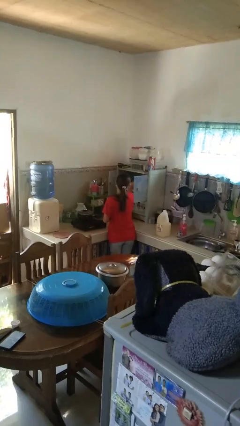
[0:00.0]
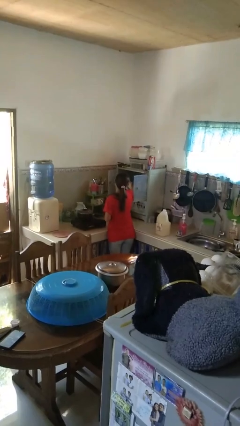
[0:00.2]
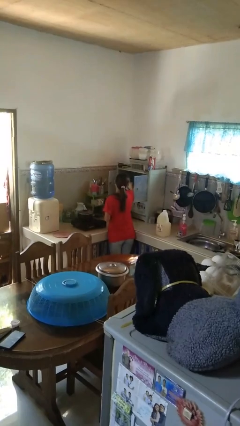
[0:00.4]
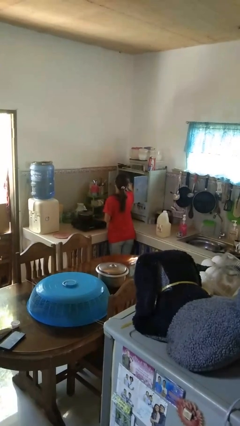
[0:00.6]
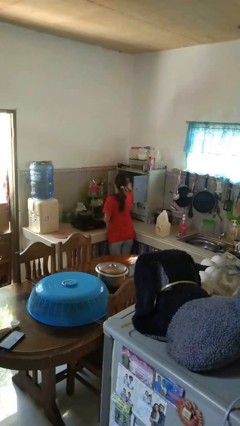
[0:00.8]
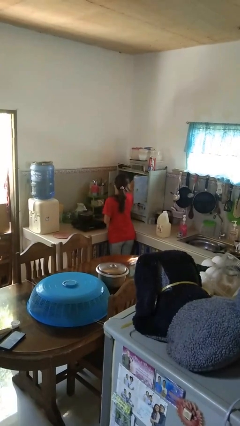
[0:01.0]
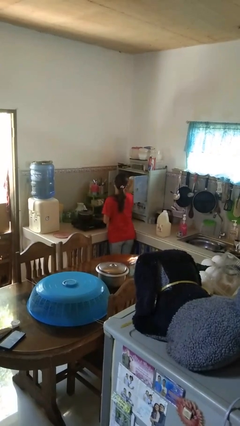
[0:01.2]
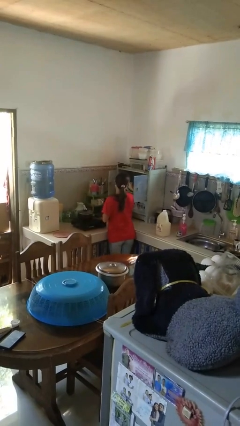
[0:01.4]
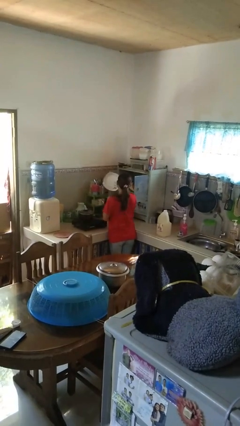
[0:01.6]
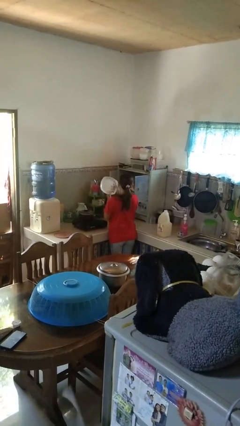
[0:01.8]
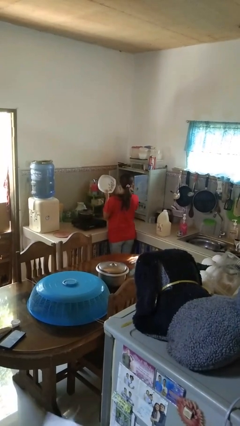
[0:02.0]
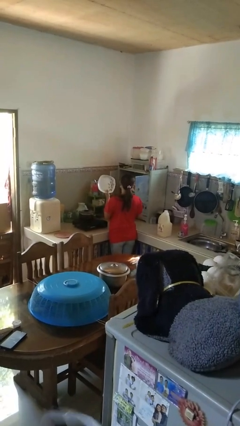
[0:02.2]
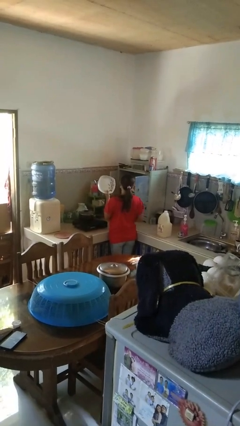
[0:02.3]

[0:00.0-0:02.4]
person takes object from cabinet

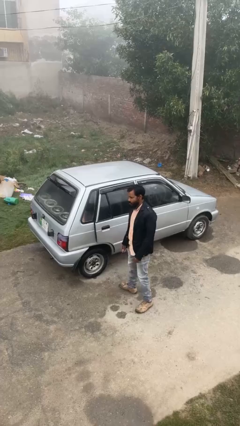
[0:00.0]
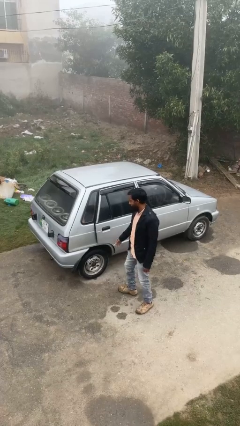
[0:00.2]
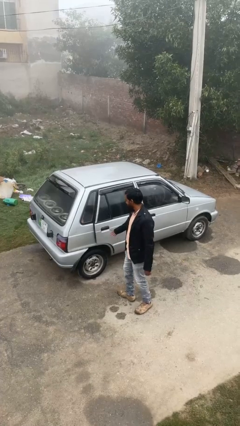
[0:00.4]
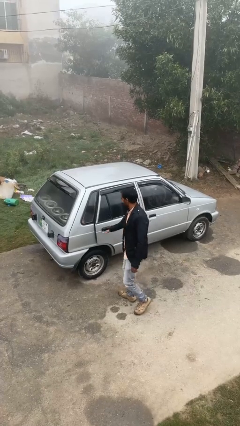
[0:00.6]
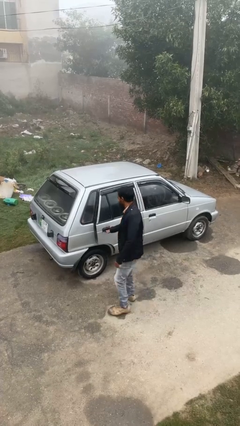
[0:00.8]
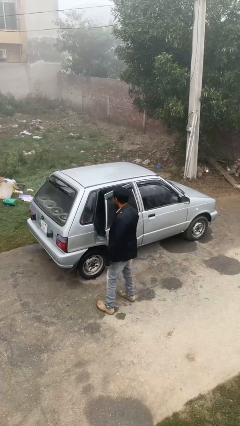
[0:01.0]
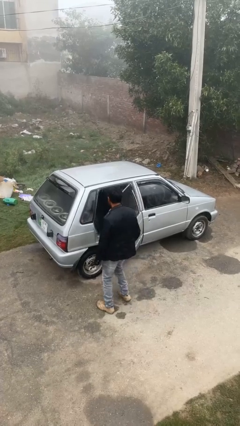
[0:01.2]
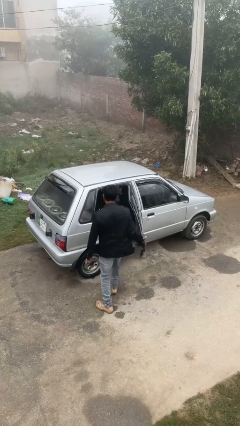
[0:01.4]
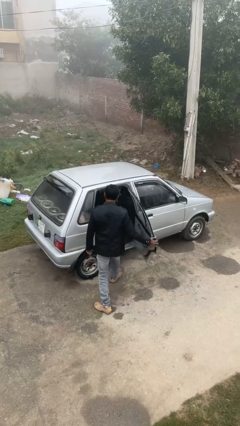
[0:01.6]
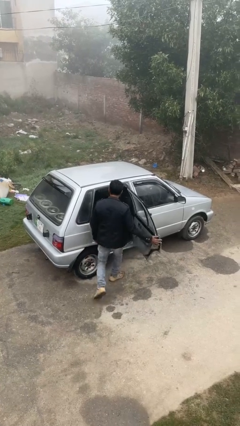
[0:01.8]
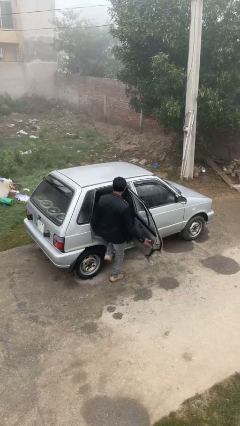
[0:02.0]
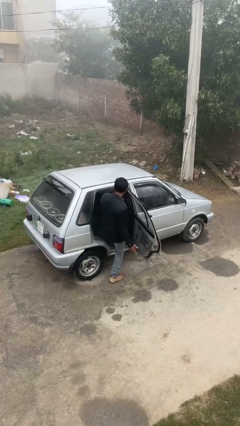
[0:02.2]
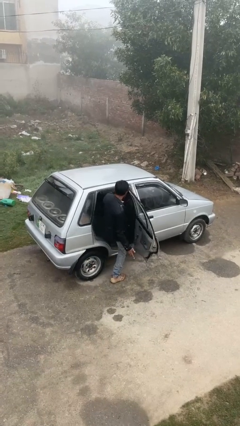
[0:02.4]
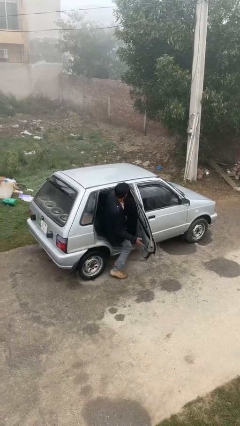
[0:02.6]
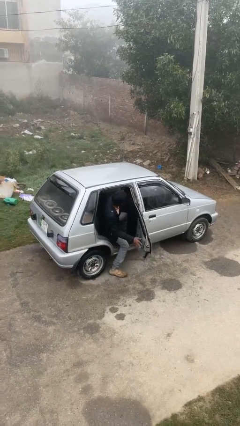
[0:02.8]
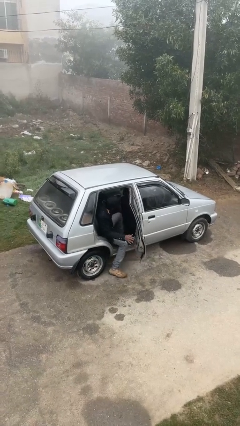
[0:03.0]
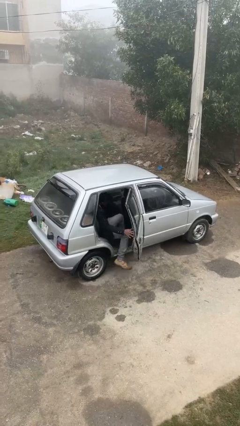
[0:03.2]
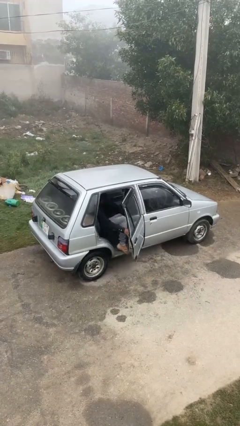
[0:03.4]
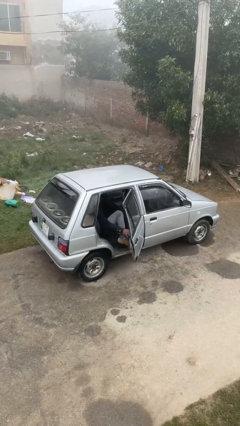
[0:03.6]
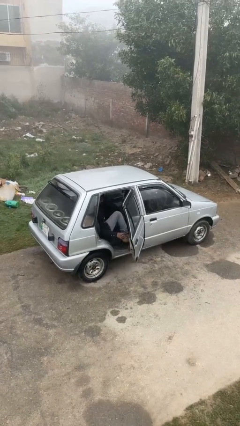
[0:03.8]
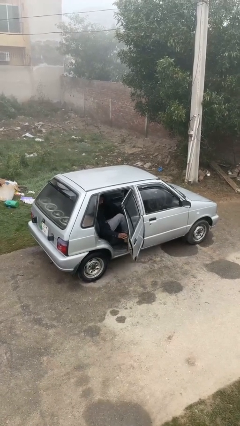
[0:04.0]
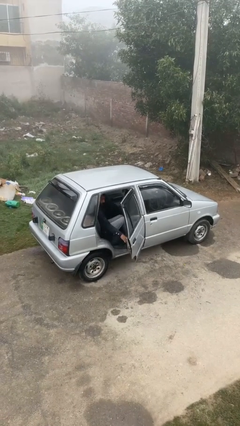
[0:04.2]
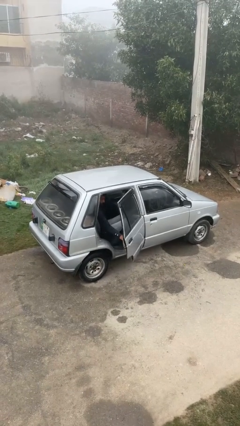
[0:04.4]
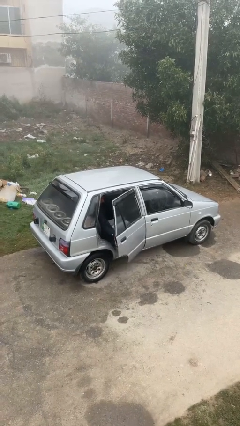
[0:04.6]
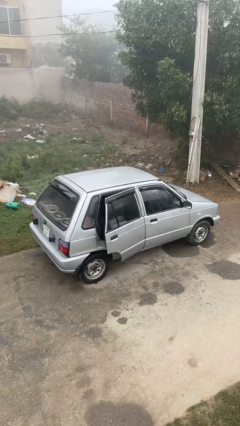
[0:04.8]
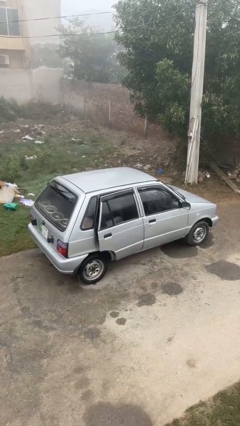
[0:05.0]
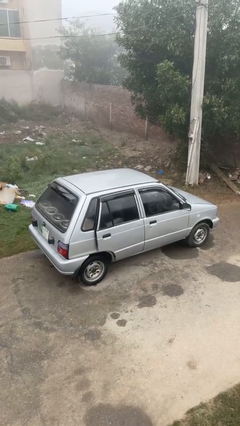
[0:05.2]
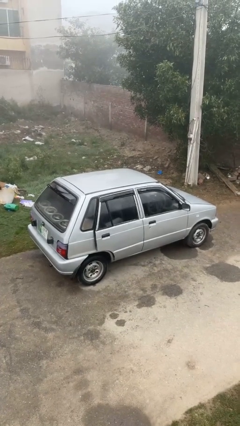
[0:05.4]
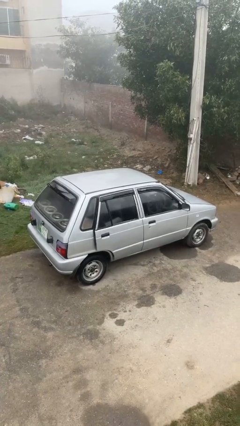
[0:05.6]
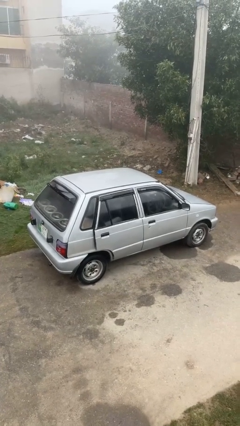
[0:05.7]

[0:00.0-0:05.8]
car picks up person

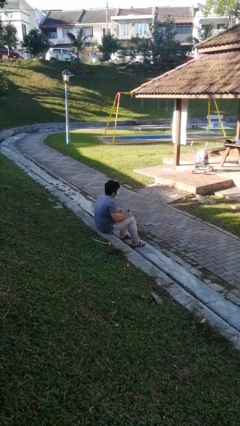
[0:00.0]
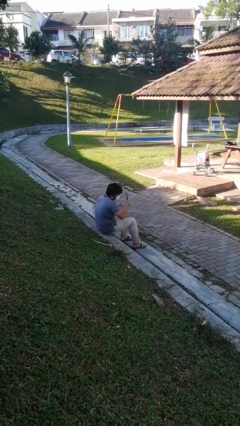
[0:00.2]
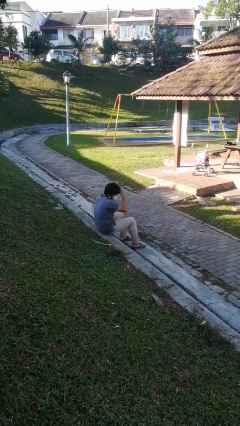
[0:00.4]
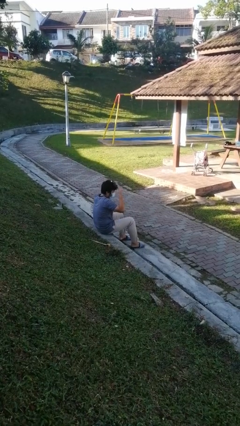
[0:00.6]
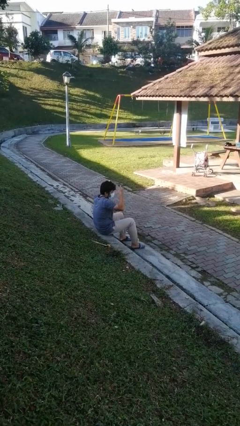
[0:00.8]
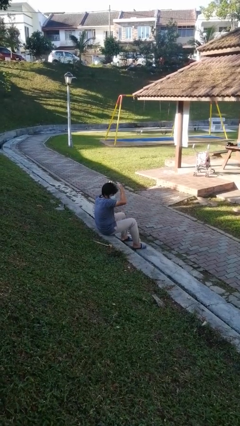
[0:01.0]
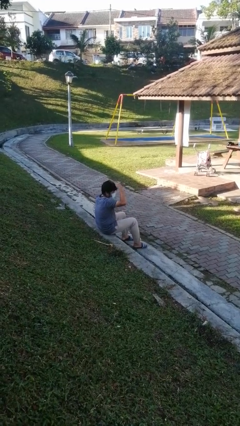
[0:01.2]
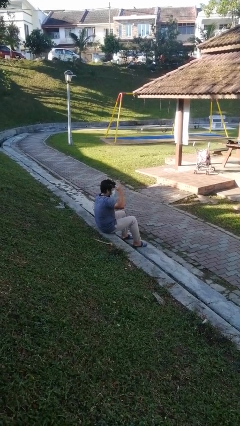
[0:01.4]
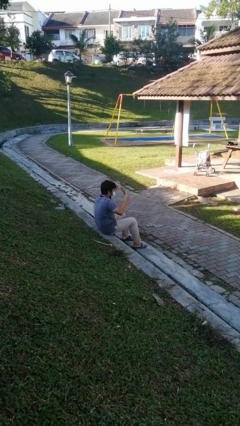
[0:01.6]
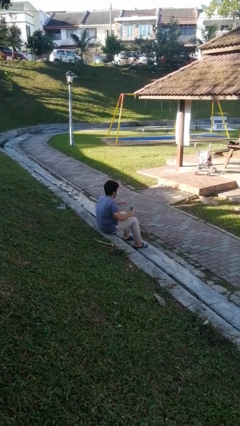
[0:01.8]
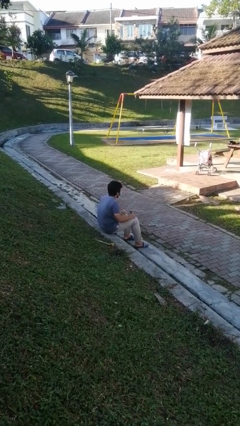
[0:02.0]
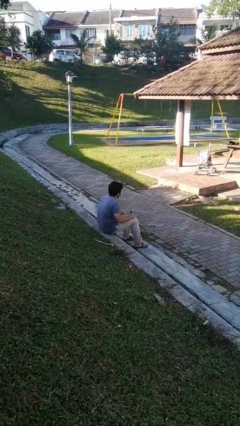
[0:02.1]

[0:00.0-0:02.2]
person brushes hair

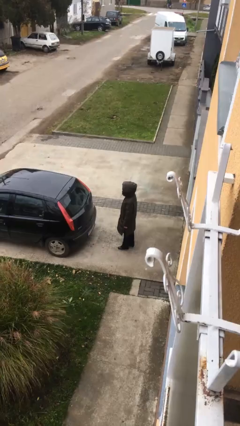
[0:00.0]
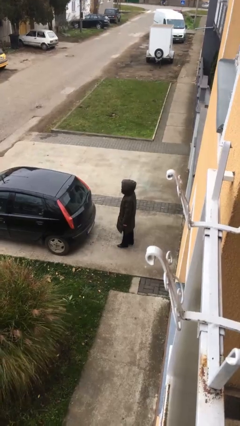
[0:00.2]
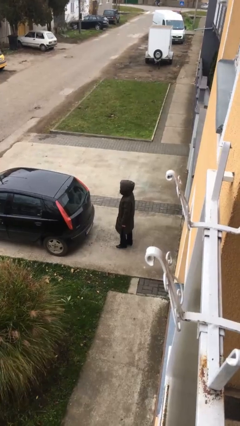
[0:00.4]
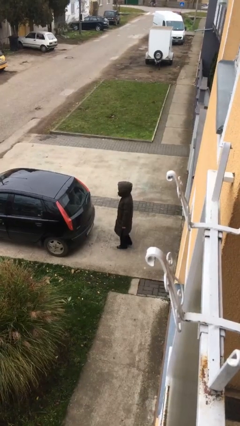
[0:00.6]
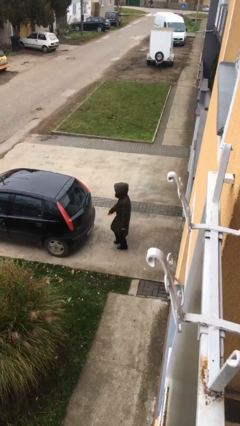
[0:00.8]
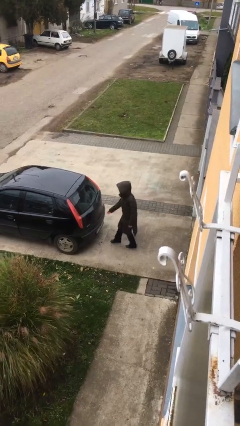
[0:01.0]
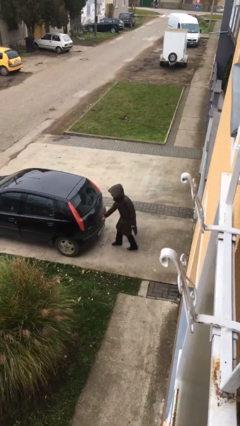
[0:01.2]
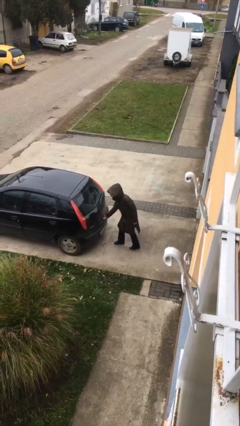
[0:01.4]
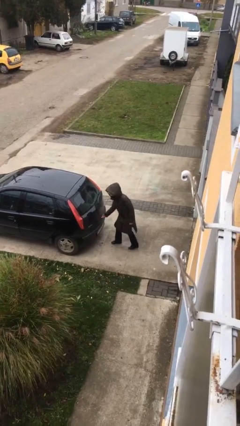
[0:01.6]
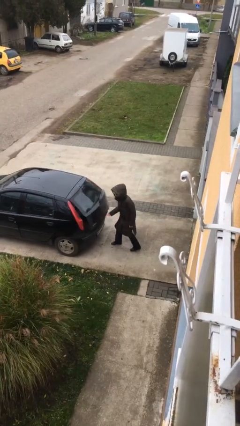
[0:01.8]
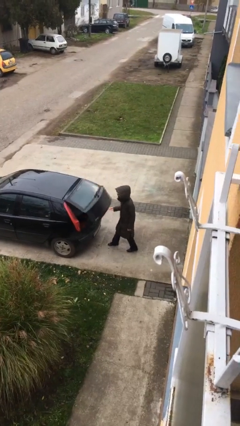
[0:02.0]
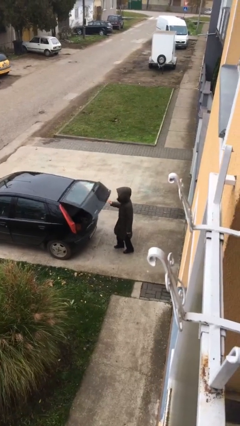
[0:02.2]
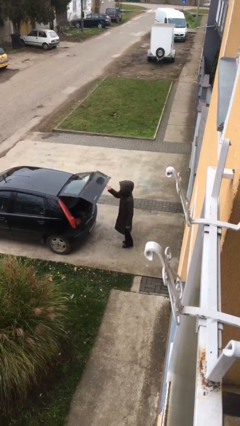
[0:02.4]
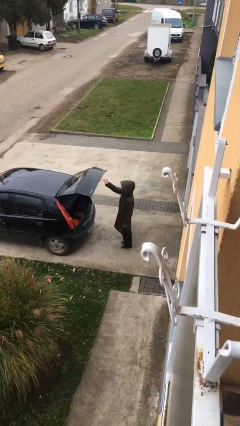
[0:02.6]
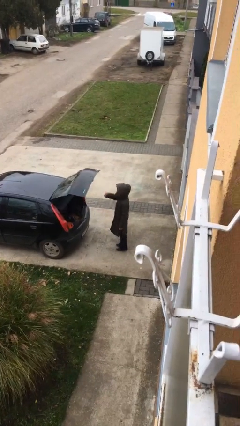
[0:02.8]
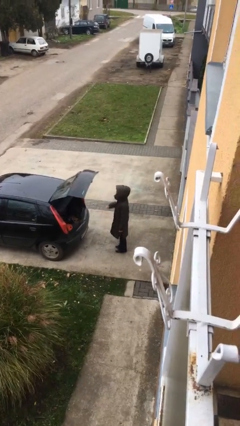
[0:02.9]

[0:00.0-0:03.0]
person opens car trunk

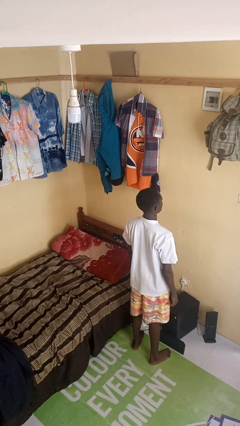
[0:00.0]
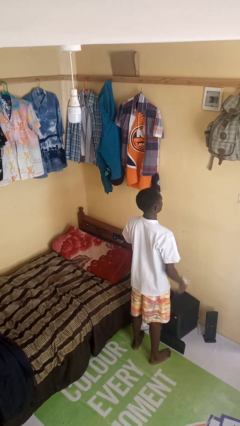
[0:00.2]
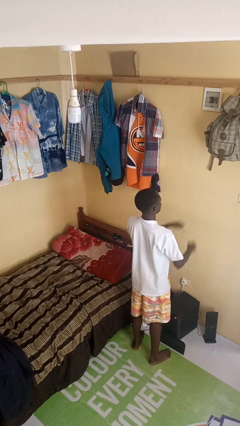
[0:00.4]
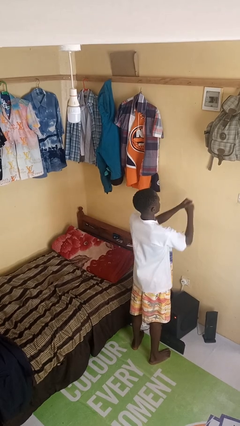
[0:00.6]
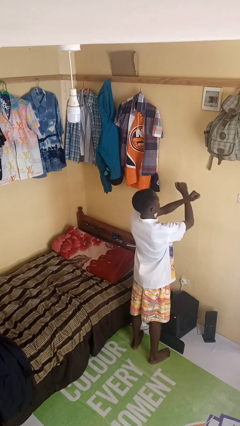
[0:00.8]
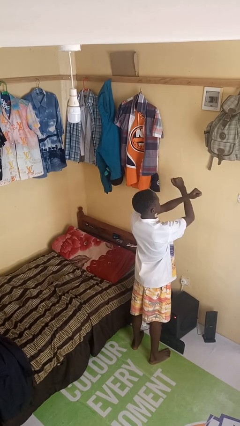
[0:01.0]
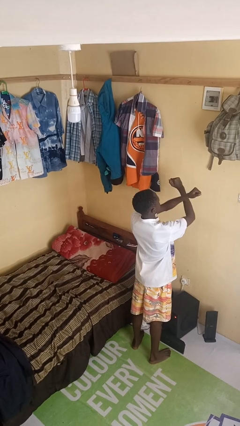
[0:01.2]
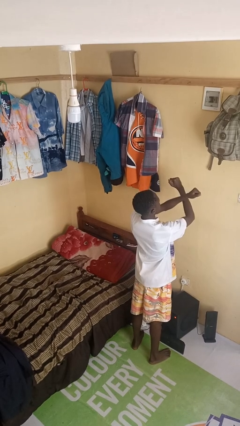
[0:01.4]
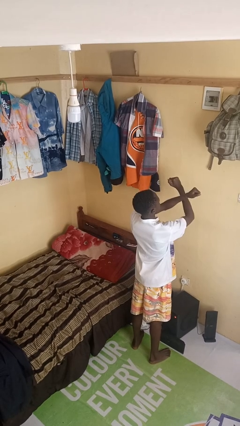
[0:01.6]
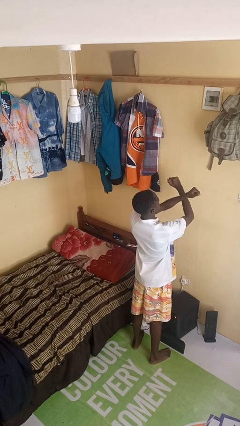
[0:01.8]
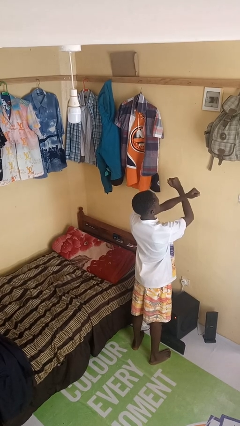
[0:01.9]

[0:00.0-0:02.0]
person gestures arms x

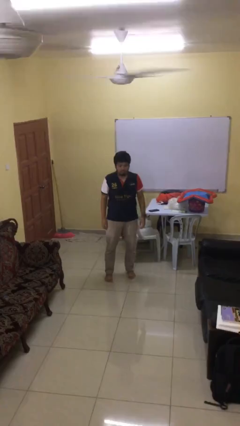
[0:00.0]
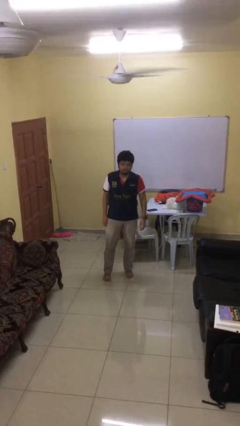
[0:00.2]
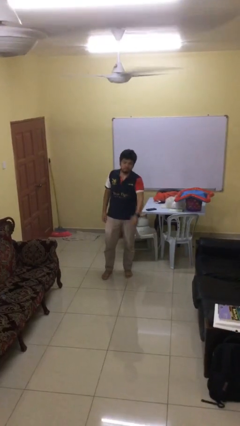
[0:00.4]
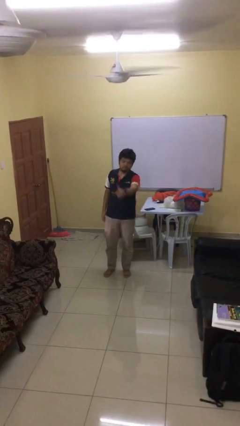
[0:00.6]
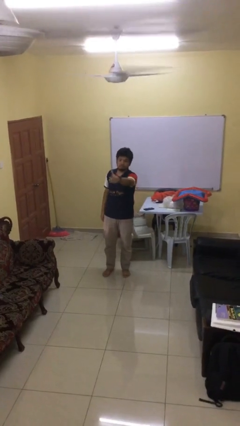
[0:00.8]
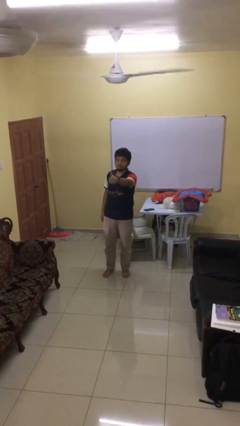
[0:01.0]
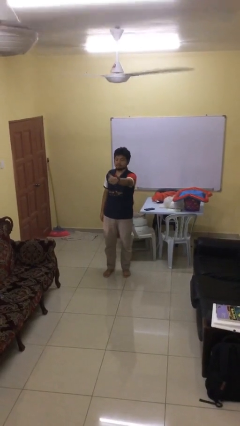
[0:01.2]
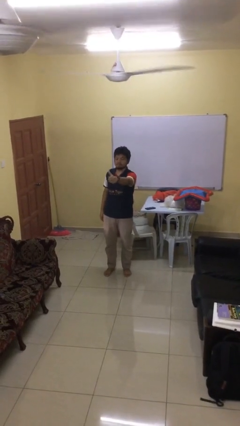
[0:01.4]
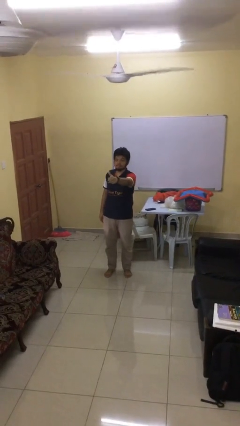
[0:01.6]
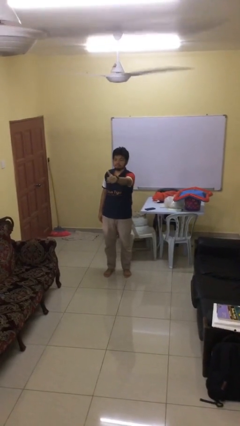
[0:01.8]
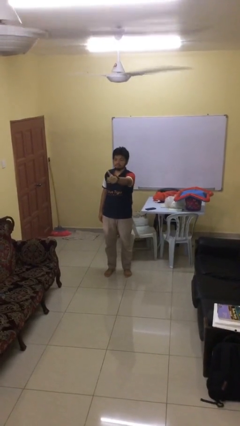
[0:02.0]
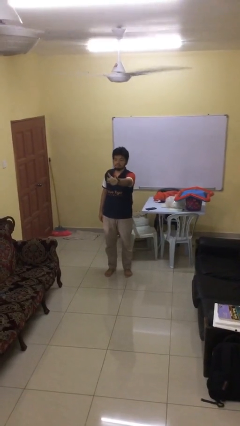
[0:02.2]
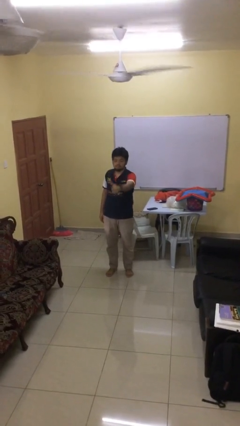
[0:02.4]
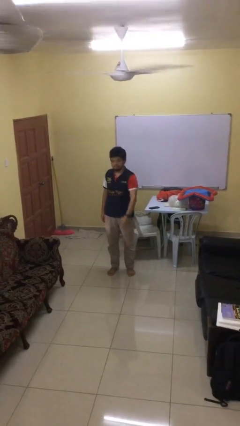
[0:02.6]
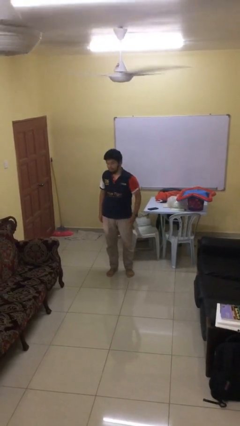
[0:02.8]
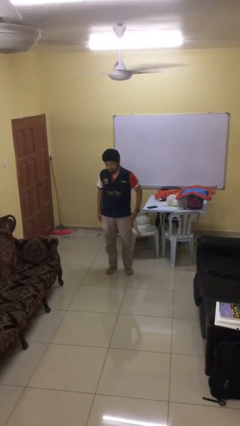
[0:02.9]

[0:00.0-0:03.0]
person gestures thumbs up
